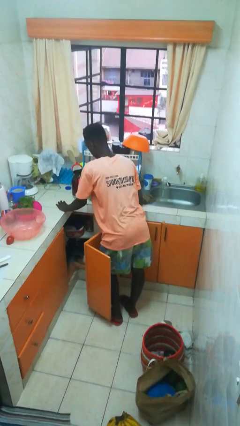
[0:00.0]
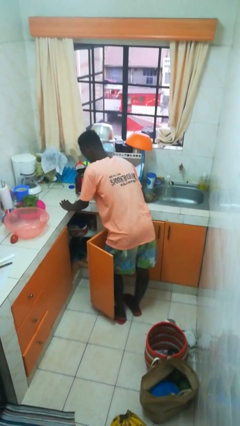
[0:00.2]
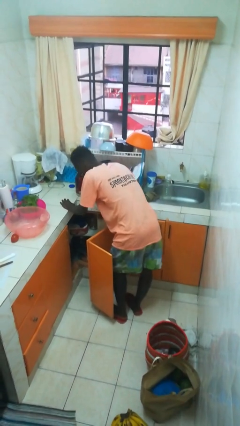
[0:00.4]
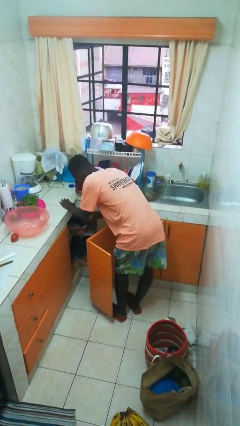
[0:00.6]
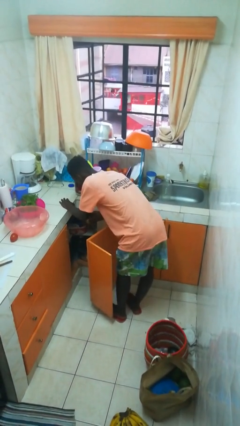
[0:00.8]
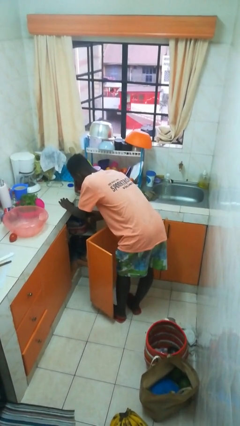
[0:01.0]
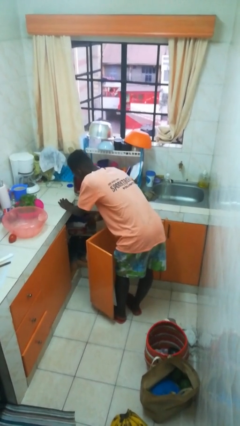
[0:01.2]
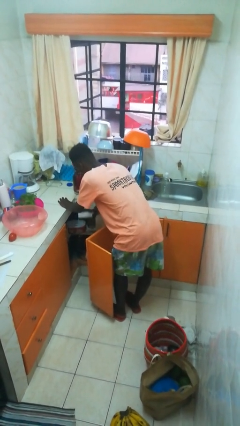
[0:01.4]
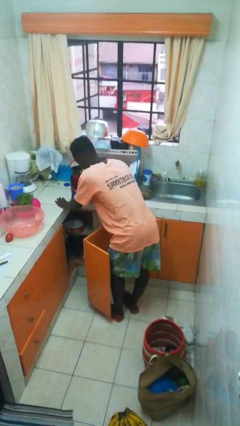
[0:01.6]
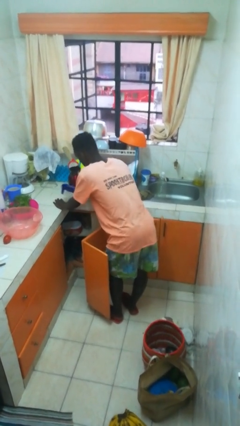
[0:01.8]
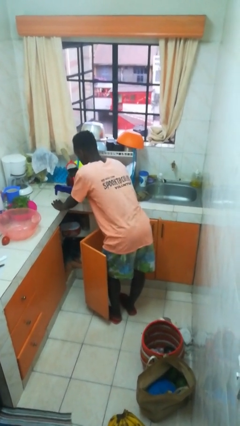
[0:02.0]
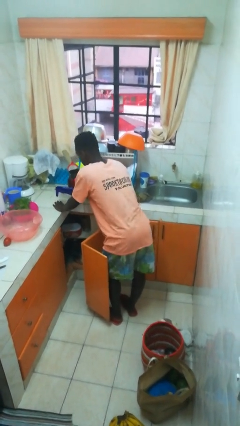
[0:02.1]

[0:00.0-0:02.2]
person takes object from cabinet

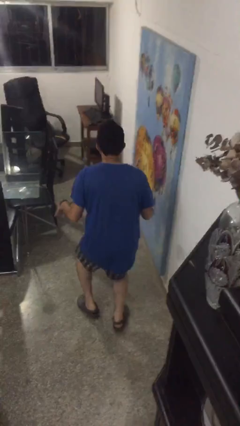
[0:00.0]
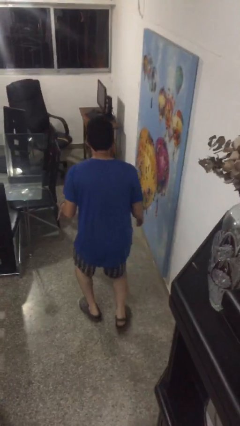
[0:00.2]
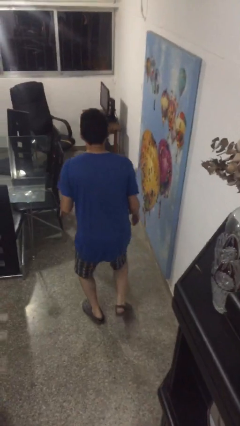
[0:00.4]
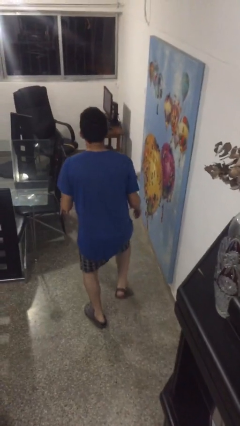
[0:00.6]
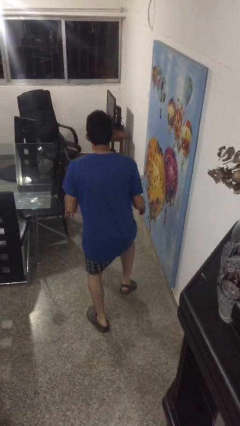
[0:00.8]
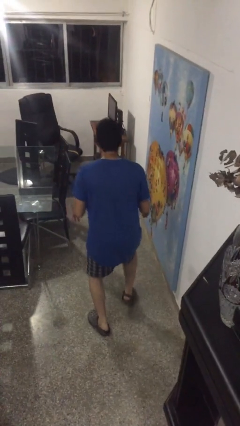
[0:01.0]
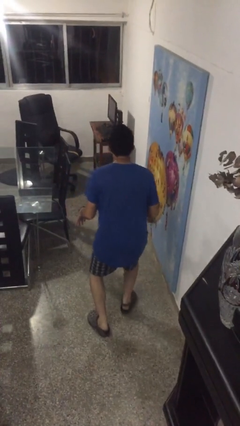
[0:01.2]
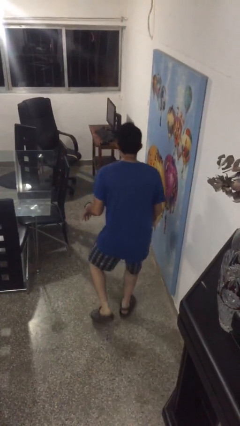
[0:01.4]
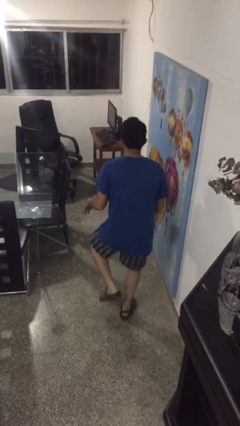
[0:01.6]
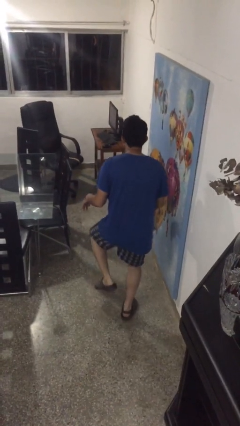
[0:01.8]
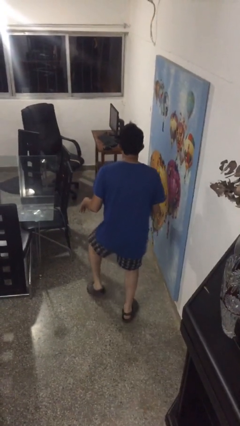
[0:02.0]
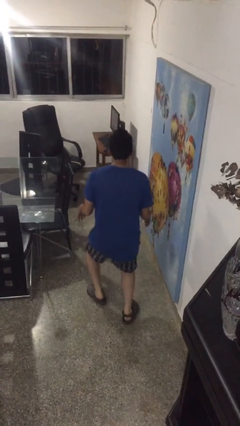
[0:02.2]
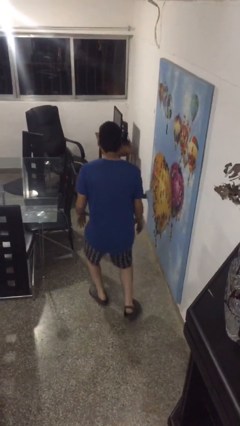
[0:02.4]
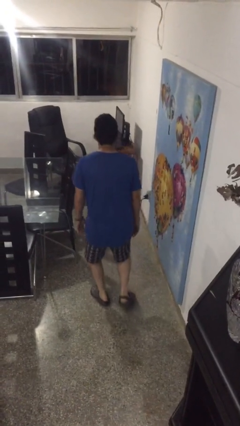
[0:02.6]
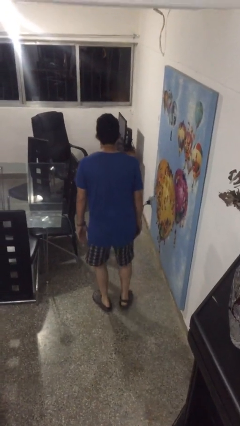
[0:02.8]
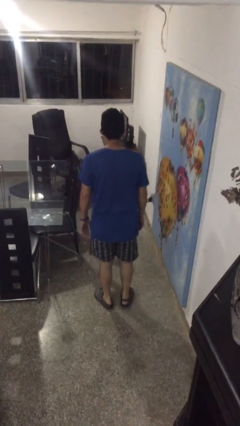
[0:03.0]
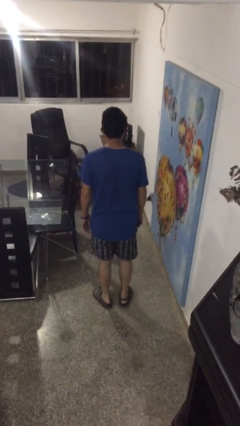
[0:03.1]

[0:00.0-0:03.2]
person walks tiptoe

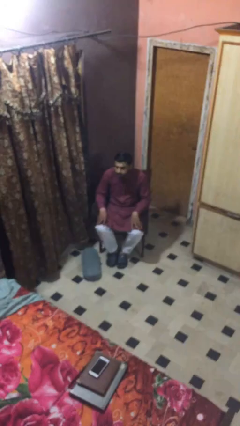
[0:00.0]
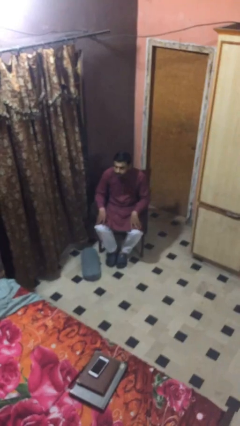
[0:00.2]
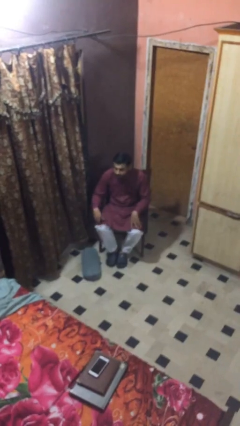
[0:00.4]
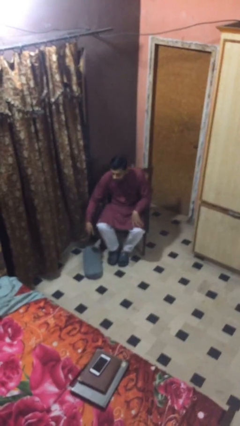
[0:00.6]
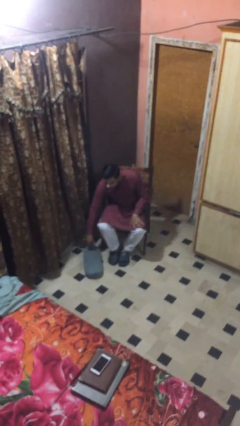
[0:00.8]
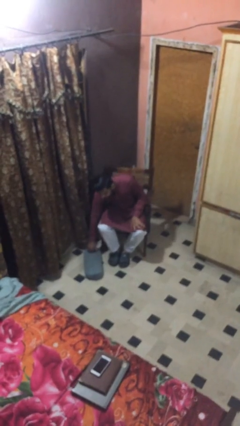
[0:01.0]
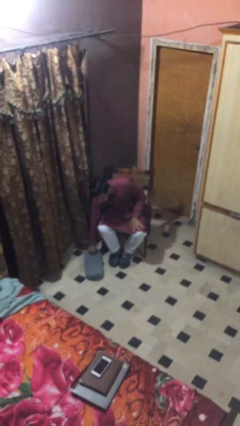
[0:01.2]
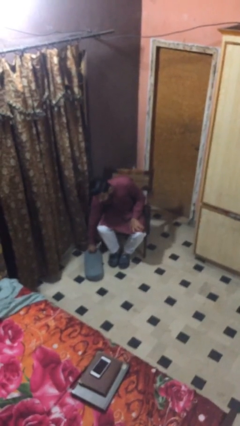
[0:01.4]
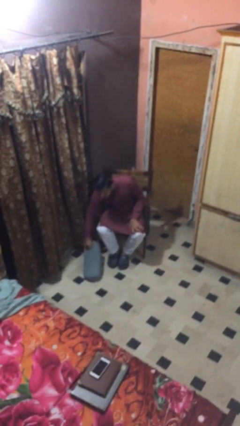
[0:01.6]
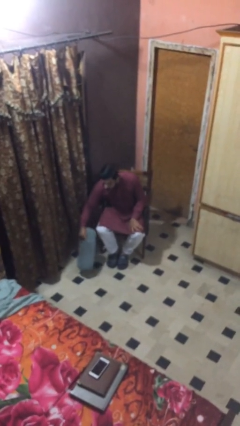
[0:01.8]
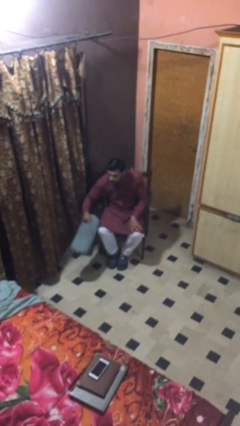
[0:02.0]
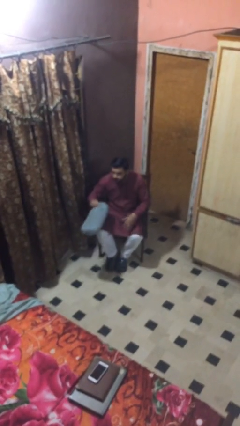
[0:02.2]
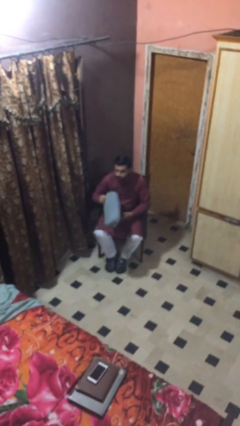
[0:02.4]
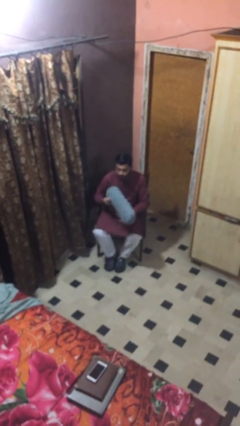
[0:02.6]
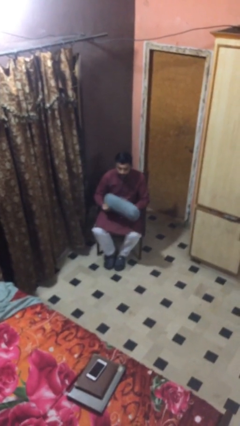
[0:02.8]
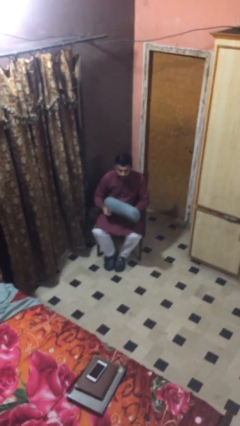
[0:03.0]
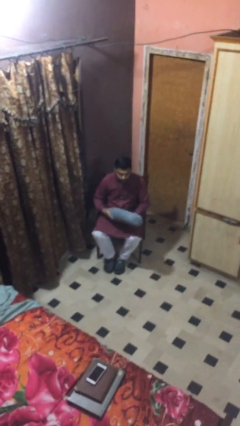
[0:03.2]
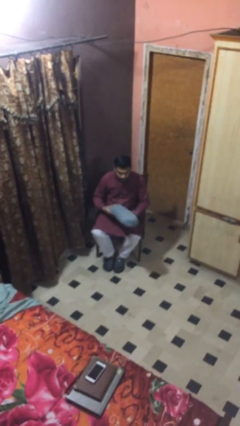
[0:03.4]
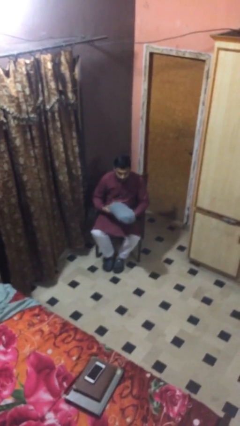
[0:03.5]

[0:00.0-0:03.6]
person picks up object from floor

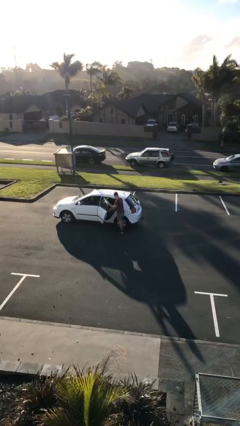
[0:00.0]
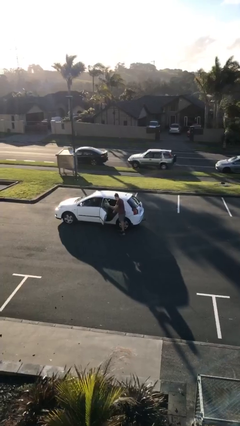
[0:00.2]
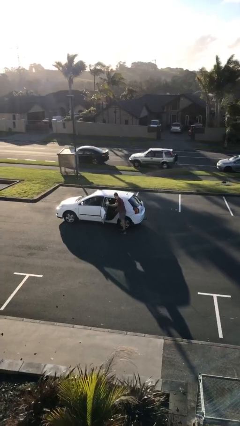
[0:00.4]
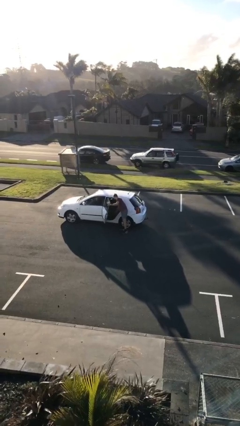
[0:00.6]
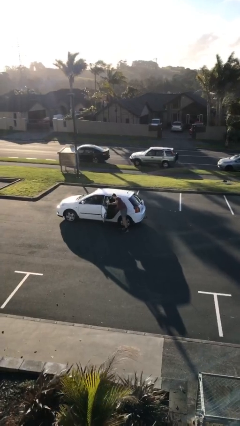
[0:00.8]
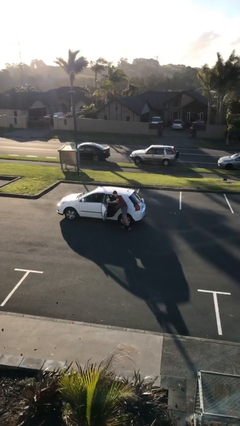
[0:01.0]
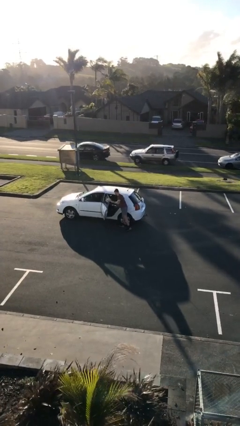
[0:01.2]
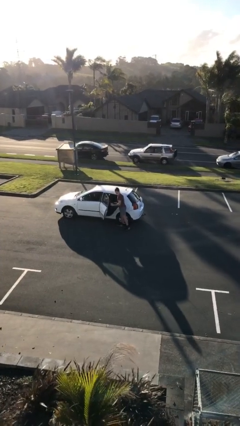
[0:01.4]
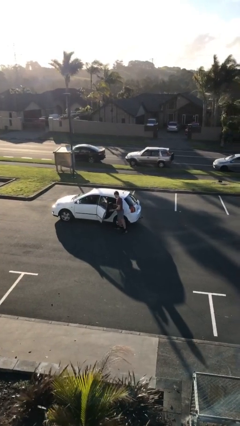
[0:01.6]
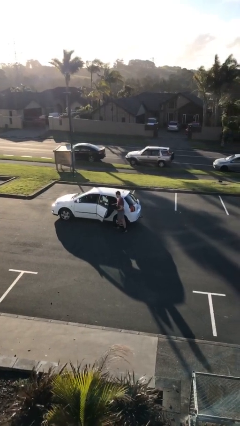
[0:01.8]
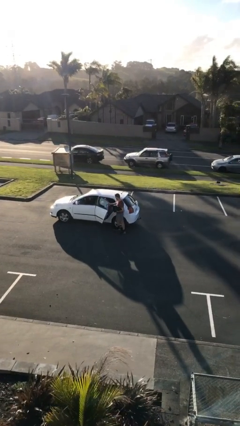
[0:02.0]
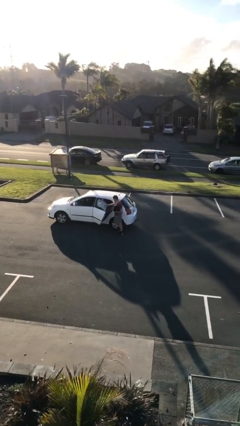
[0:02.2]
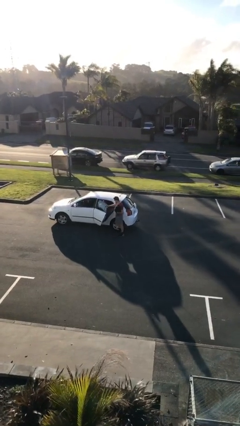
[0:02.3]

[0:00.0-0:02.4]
person unloads car

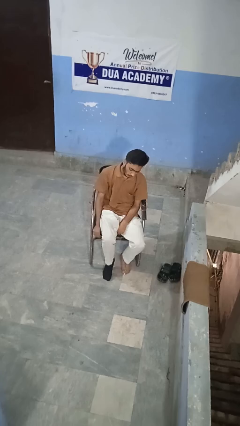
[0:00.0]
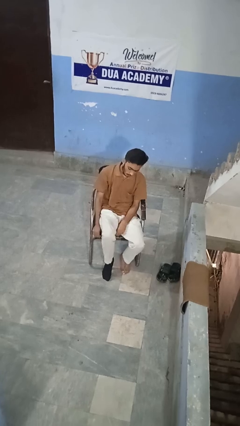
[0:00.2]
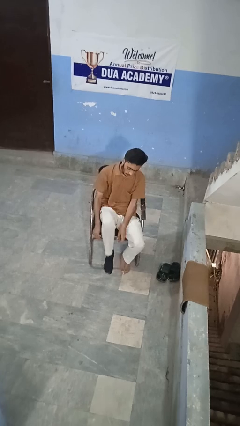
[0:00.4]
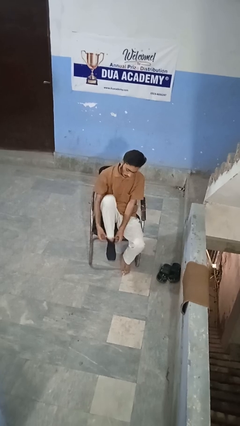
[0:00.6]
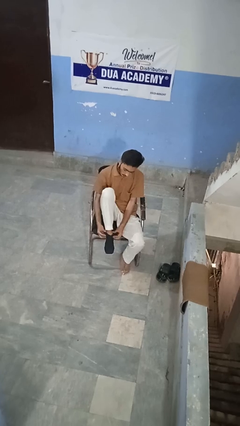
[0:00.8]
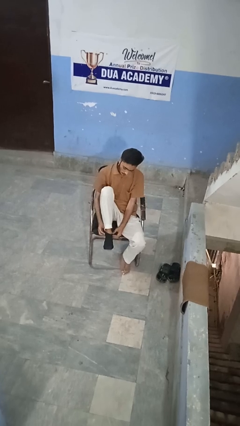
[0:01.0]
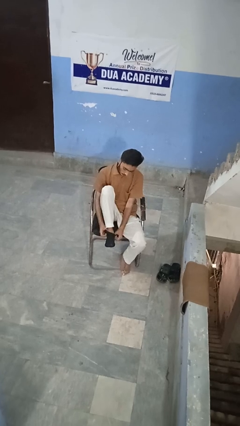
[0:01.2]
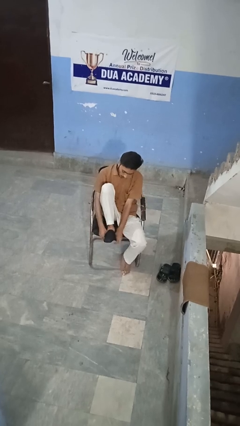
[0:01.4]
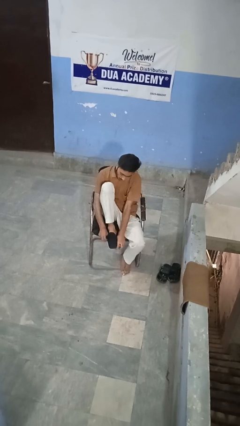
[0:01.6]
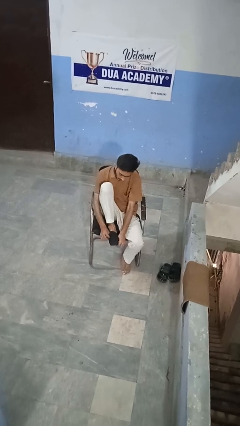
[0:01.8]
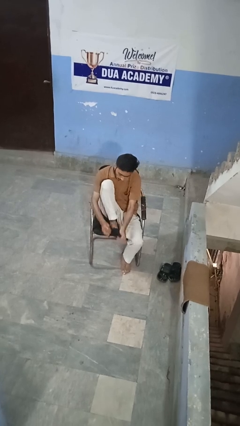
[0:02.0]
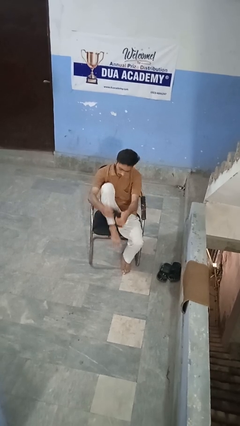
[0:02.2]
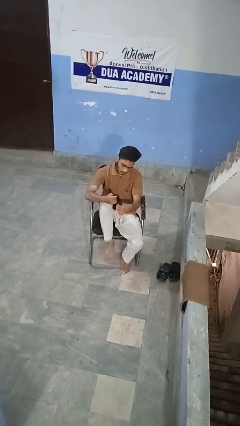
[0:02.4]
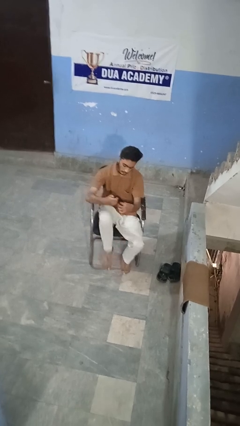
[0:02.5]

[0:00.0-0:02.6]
person takes off socks

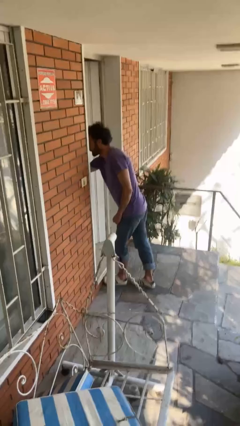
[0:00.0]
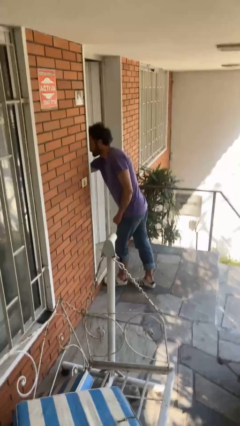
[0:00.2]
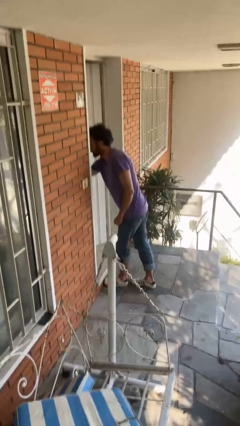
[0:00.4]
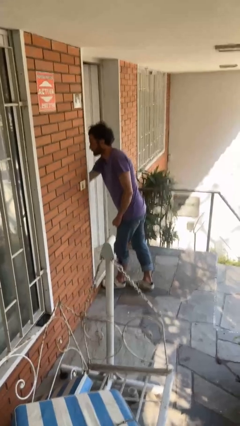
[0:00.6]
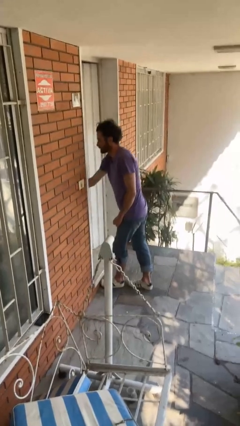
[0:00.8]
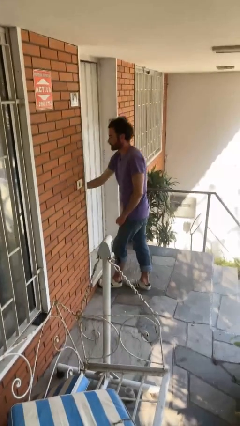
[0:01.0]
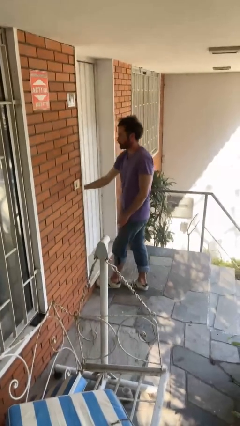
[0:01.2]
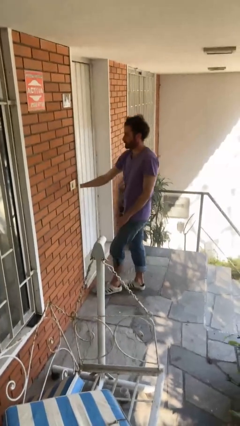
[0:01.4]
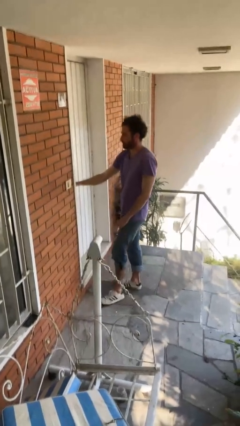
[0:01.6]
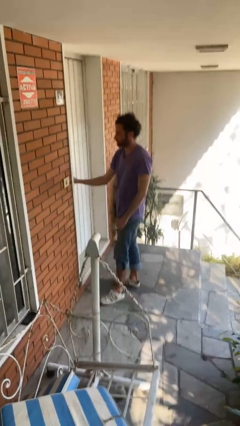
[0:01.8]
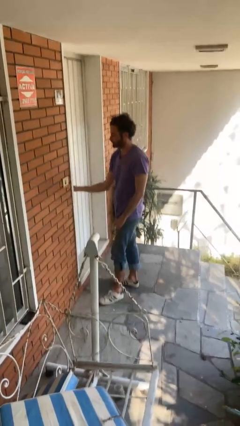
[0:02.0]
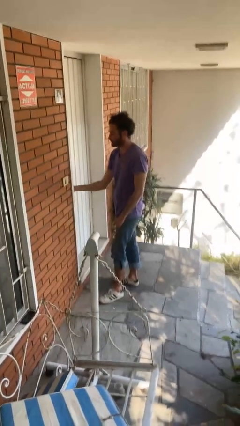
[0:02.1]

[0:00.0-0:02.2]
person closes facility door

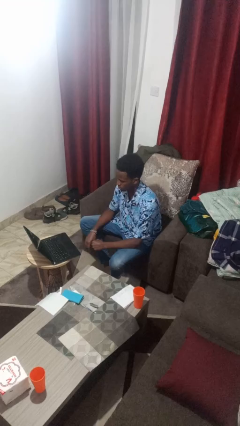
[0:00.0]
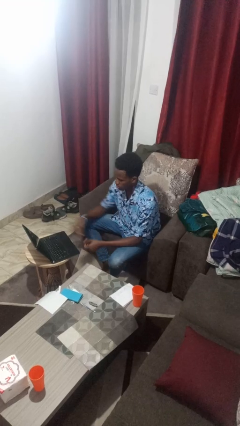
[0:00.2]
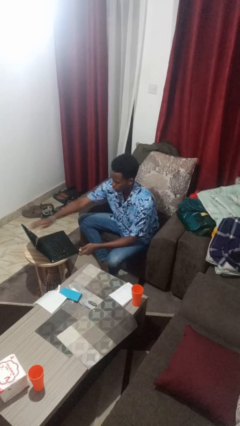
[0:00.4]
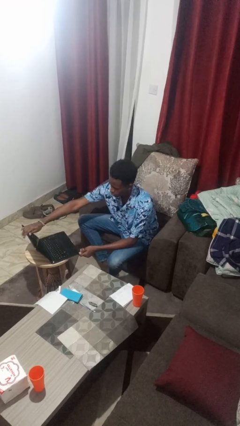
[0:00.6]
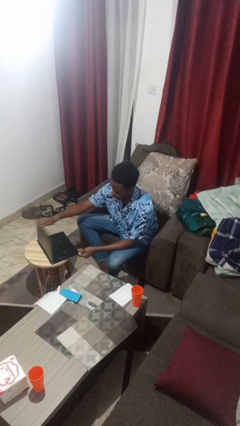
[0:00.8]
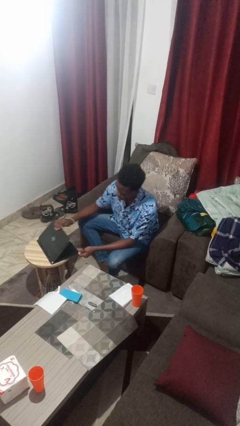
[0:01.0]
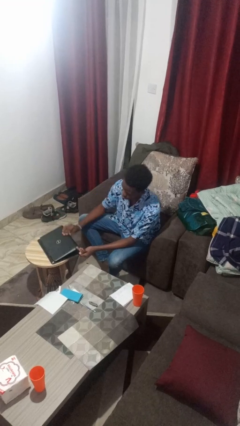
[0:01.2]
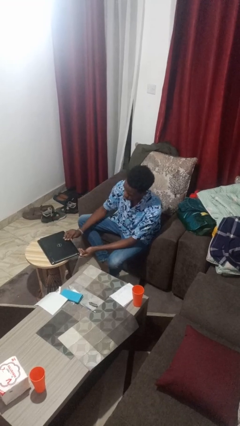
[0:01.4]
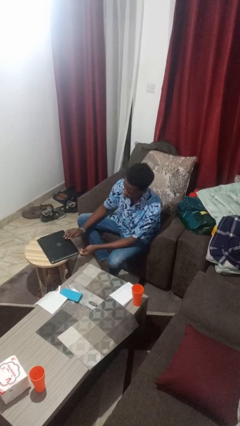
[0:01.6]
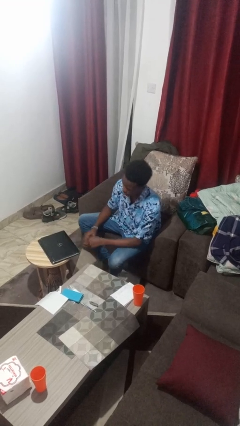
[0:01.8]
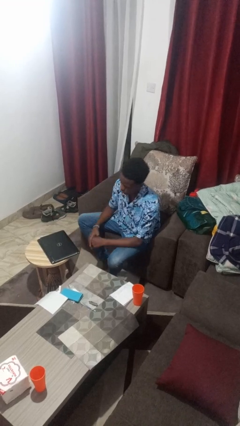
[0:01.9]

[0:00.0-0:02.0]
person closes laptop
